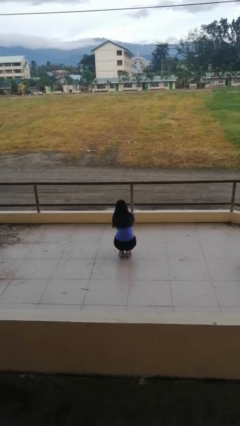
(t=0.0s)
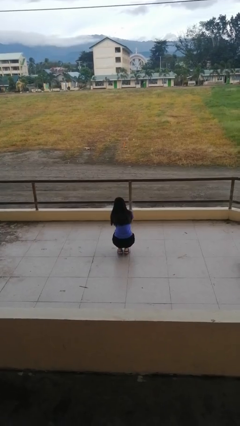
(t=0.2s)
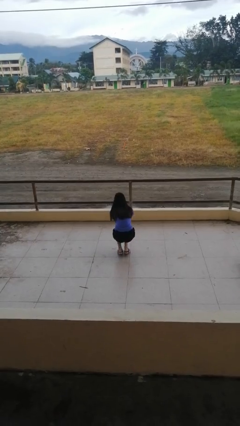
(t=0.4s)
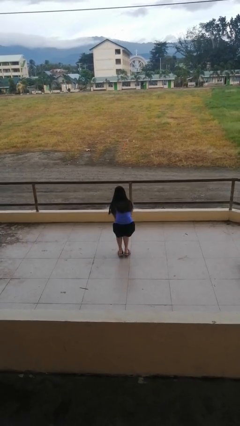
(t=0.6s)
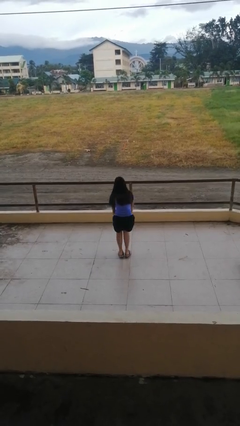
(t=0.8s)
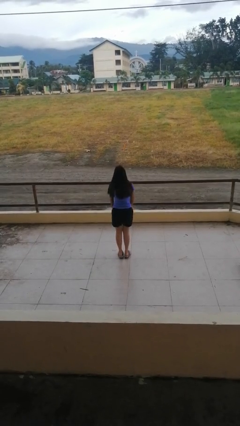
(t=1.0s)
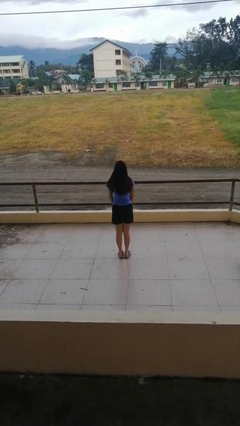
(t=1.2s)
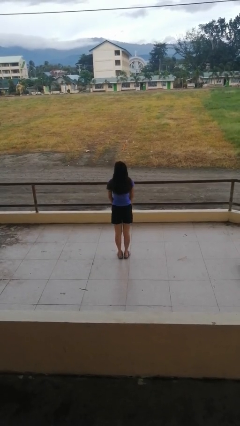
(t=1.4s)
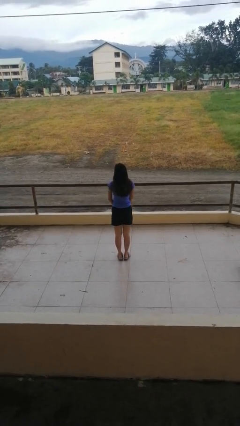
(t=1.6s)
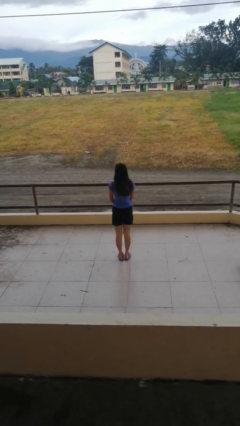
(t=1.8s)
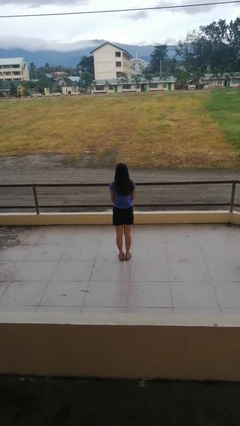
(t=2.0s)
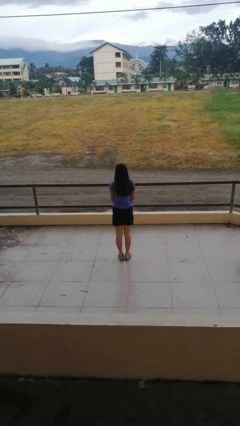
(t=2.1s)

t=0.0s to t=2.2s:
person stands up

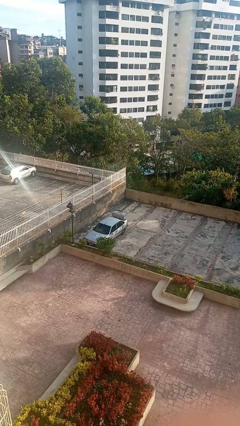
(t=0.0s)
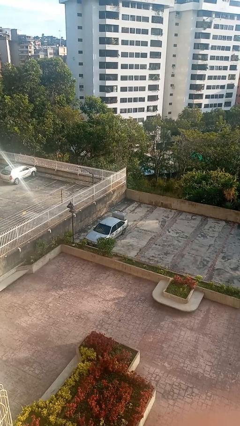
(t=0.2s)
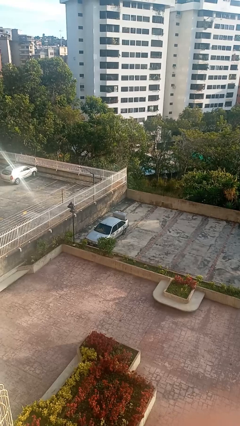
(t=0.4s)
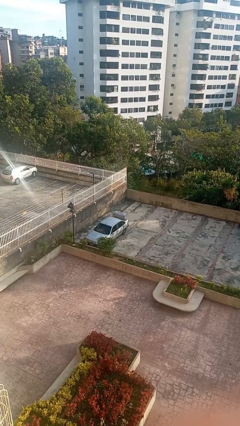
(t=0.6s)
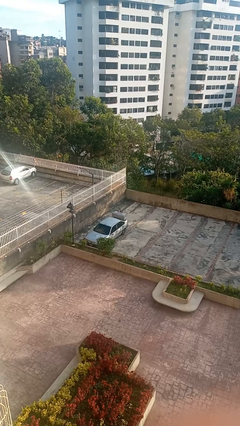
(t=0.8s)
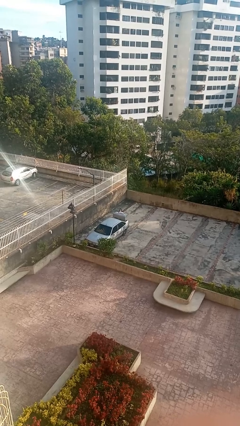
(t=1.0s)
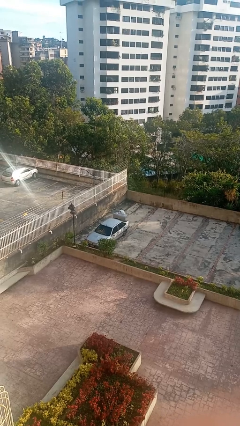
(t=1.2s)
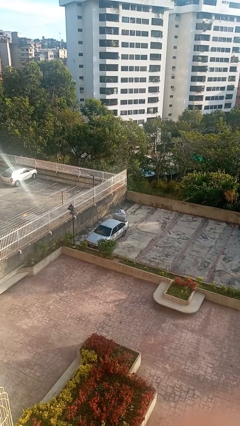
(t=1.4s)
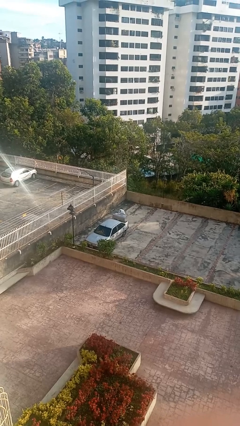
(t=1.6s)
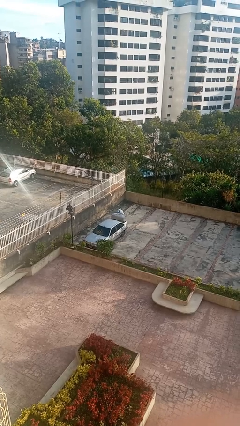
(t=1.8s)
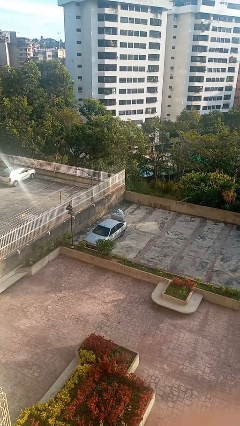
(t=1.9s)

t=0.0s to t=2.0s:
person unloads car

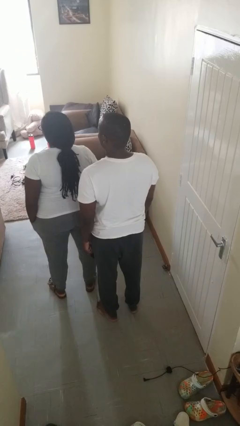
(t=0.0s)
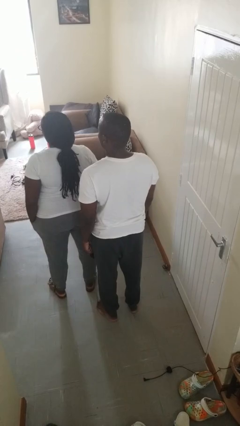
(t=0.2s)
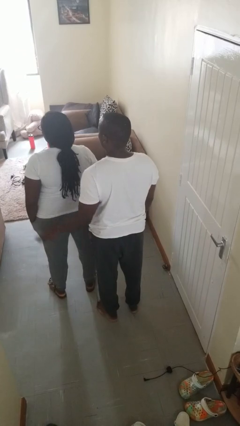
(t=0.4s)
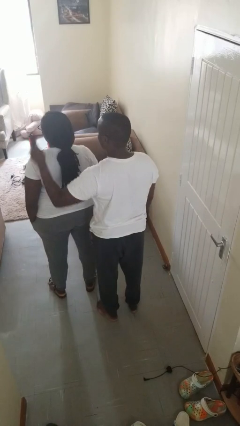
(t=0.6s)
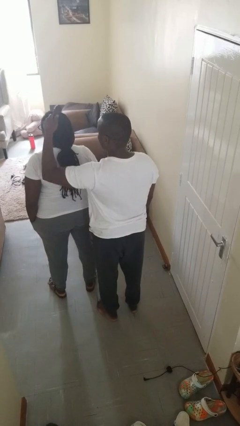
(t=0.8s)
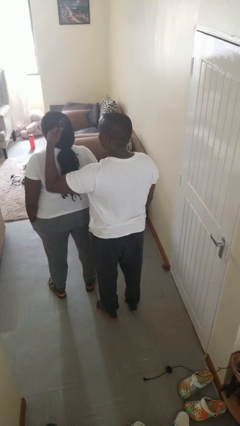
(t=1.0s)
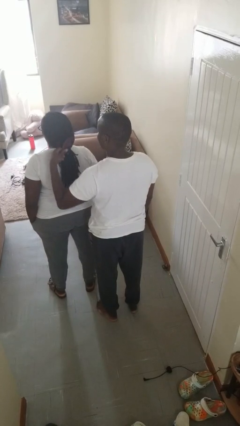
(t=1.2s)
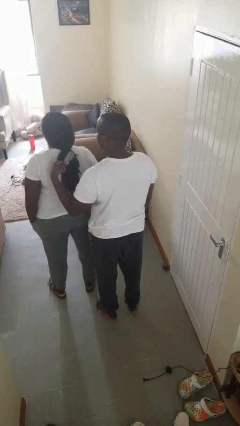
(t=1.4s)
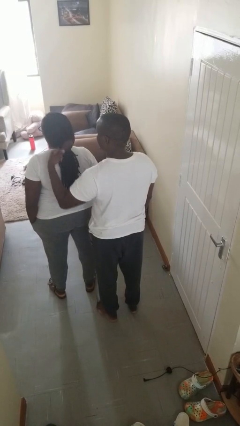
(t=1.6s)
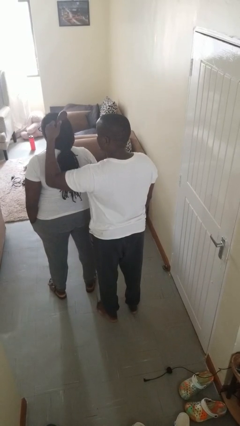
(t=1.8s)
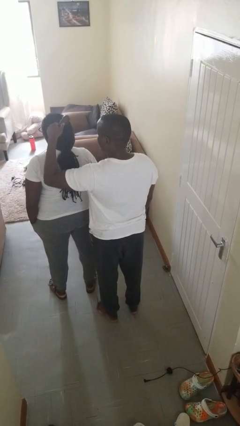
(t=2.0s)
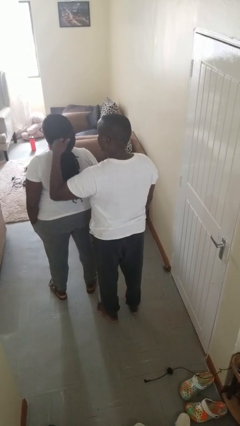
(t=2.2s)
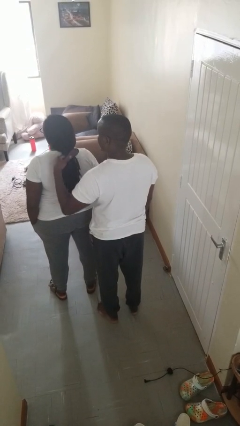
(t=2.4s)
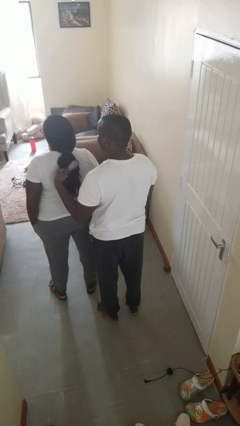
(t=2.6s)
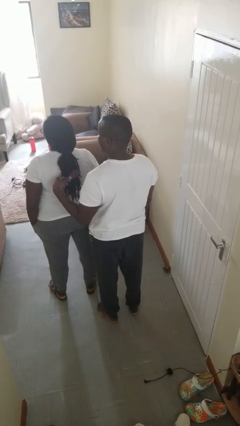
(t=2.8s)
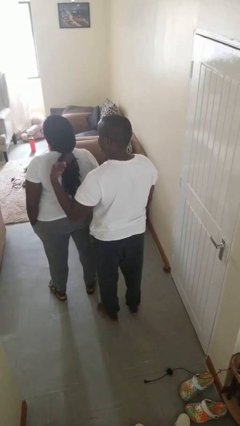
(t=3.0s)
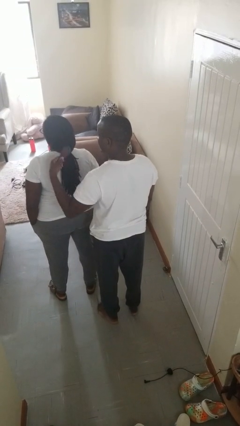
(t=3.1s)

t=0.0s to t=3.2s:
person brushes hair of person

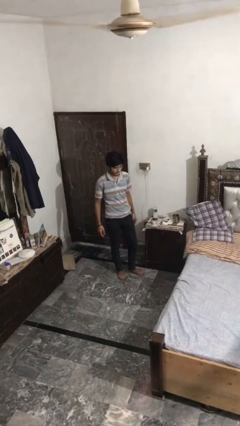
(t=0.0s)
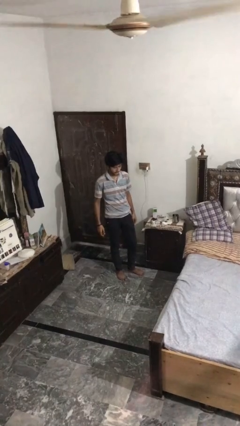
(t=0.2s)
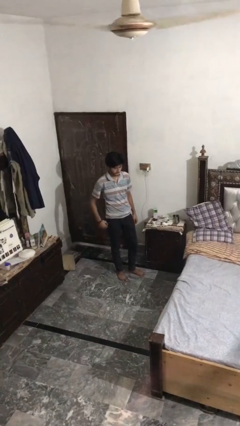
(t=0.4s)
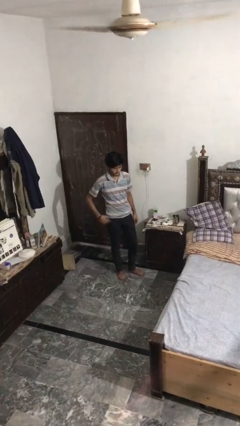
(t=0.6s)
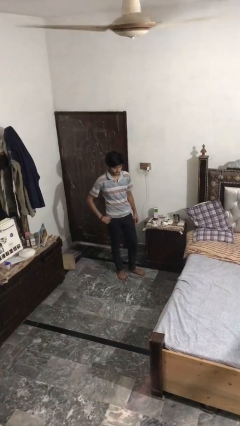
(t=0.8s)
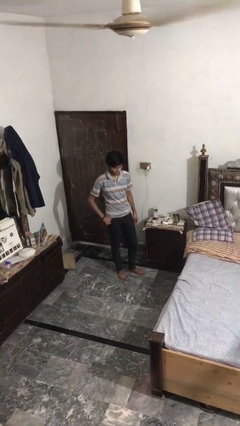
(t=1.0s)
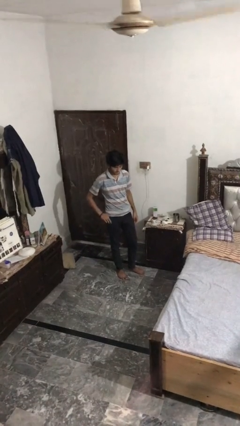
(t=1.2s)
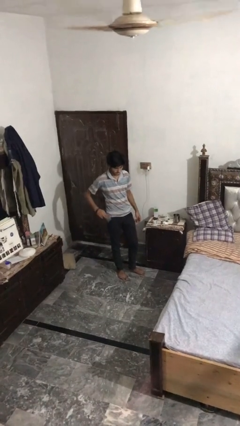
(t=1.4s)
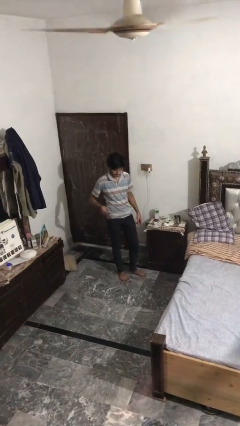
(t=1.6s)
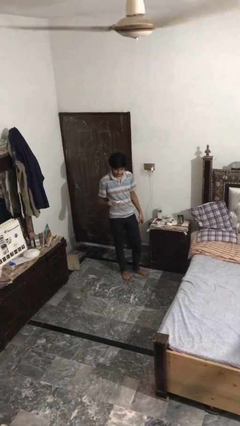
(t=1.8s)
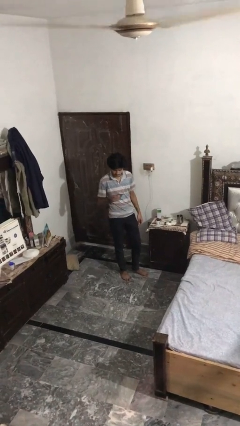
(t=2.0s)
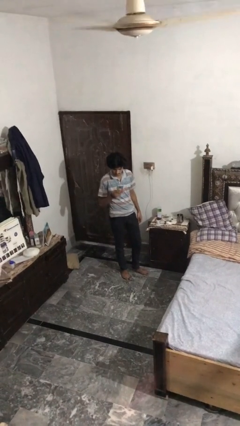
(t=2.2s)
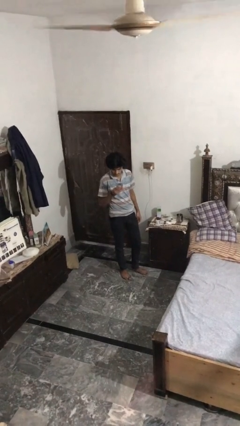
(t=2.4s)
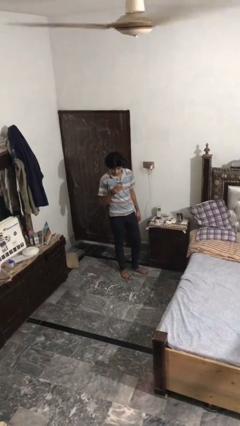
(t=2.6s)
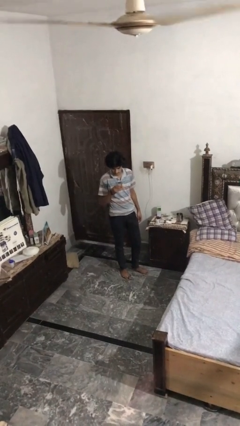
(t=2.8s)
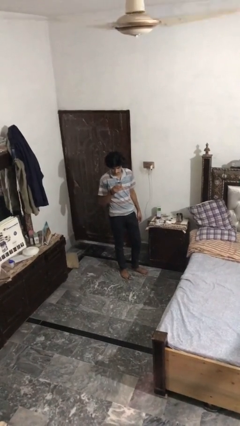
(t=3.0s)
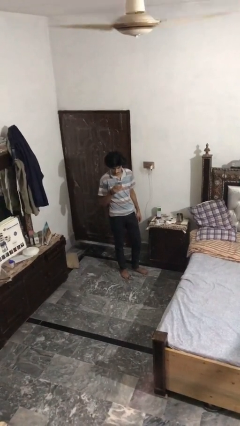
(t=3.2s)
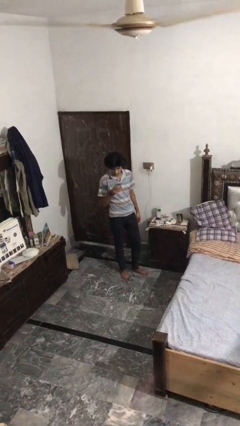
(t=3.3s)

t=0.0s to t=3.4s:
person takes phone from pocket

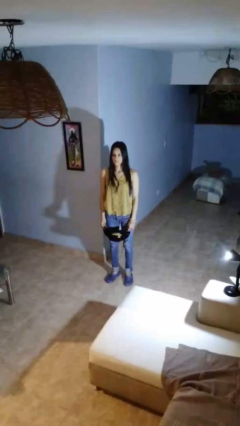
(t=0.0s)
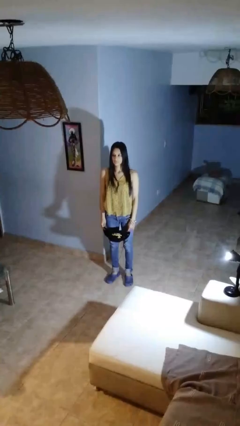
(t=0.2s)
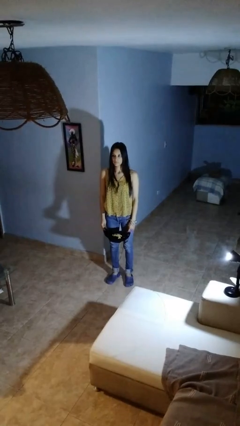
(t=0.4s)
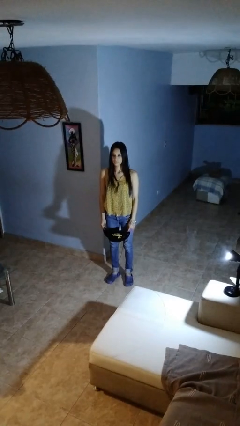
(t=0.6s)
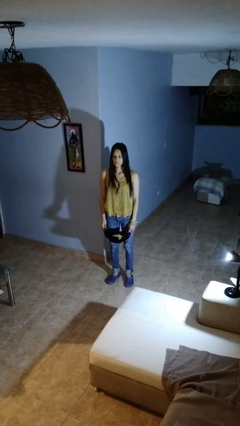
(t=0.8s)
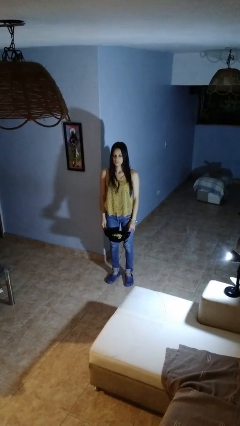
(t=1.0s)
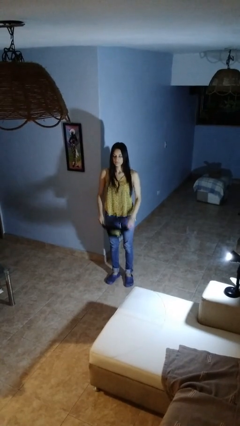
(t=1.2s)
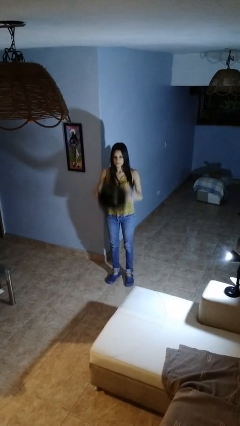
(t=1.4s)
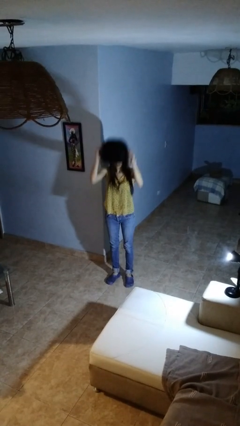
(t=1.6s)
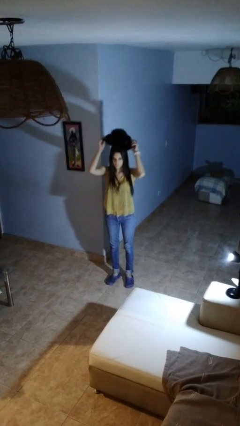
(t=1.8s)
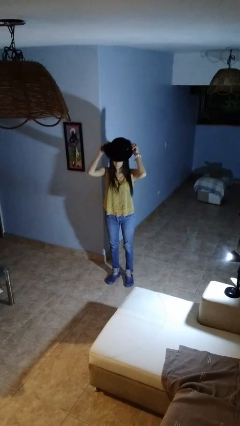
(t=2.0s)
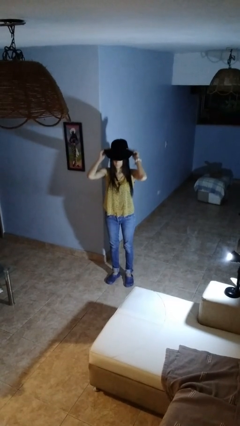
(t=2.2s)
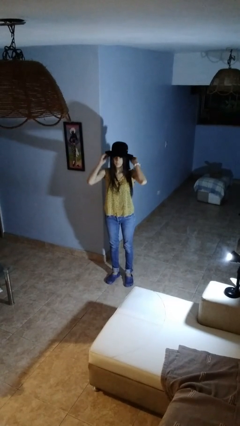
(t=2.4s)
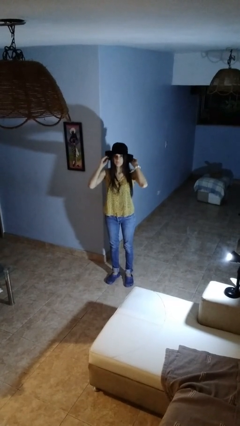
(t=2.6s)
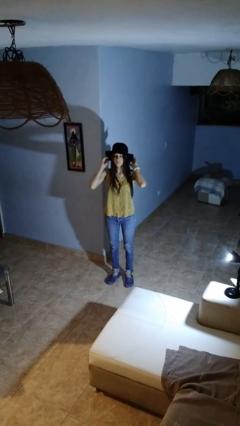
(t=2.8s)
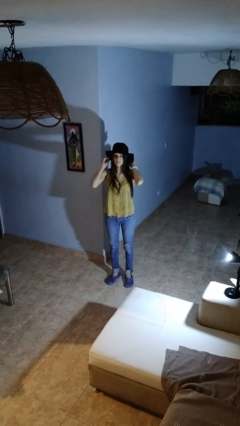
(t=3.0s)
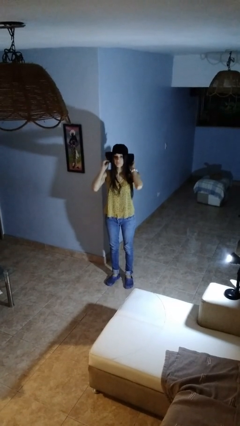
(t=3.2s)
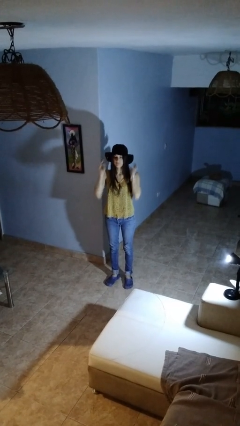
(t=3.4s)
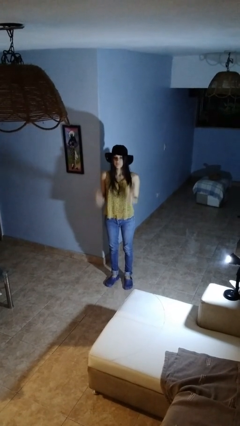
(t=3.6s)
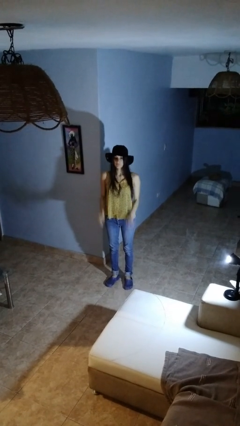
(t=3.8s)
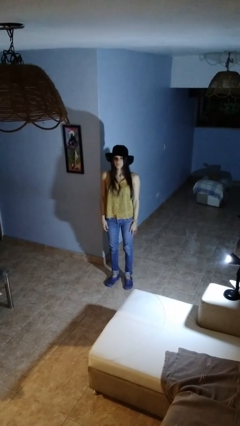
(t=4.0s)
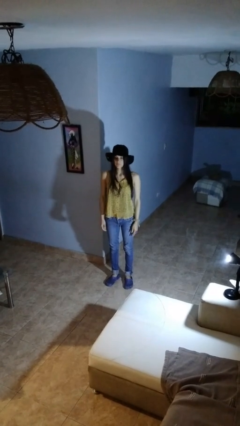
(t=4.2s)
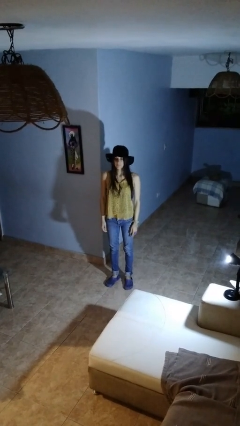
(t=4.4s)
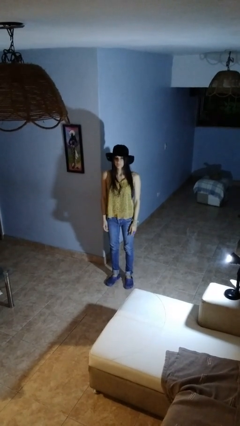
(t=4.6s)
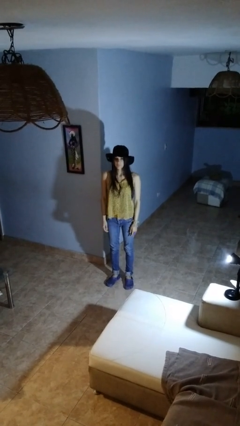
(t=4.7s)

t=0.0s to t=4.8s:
person puts on hat

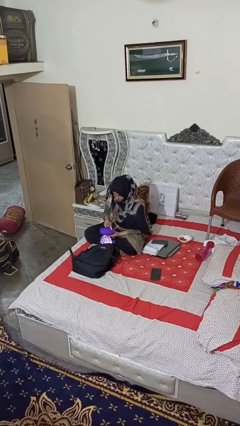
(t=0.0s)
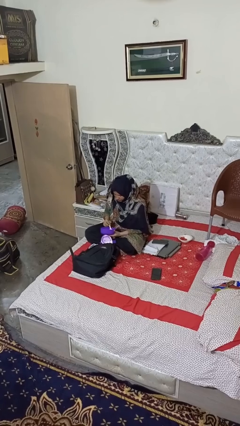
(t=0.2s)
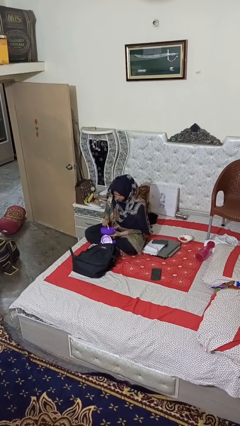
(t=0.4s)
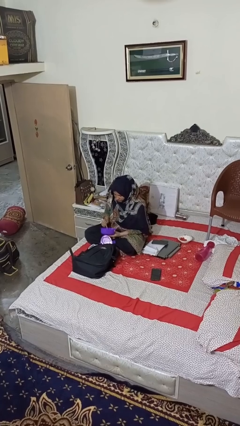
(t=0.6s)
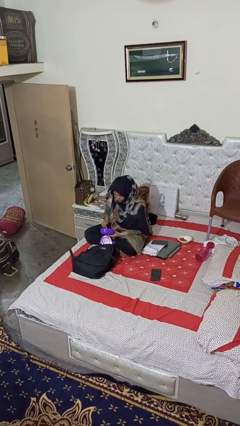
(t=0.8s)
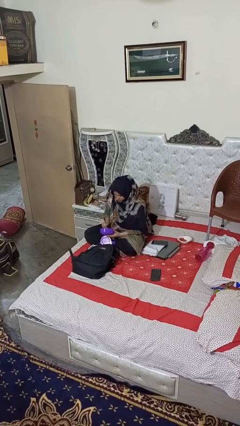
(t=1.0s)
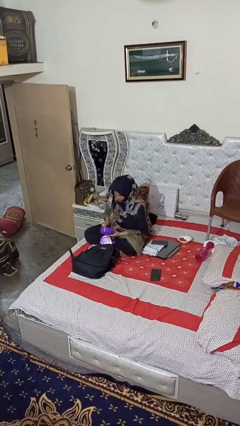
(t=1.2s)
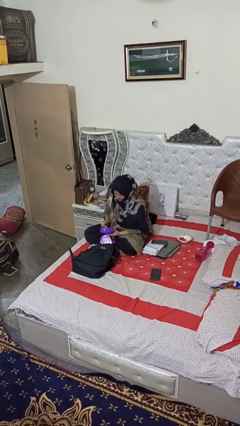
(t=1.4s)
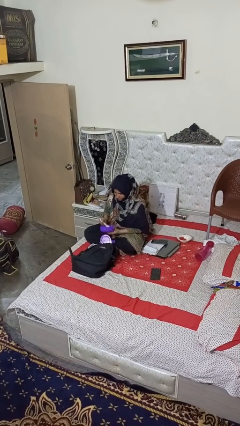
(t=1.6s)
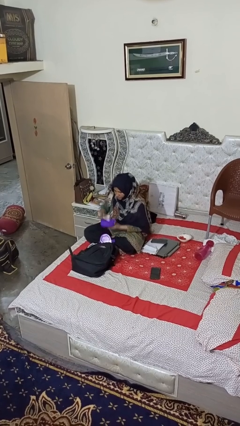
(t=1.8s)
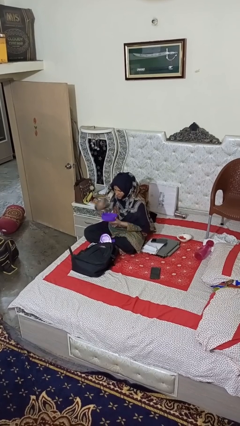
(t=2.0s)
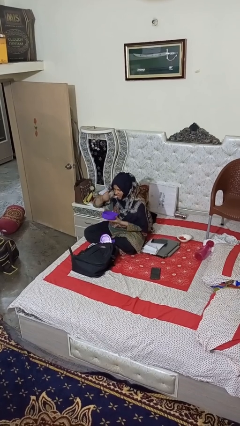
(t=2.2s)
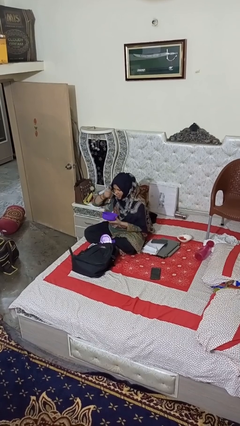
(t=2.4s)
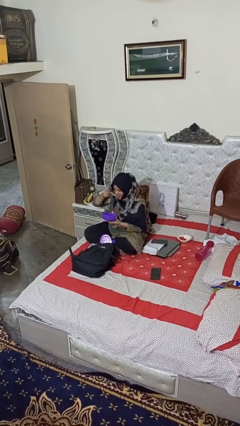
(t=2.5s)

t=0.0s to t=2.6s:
person eats snack from bag
